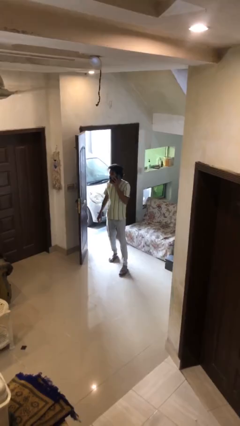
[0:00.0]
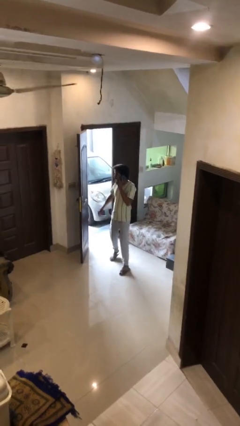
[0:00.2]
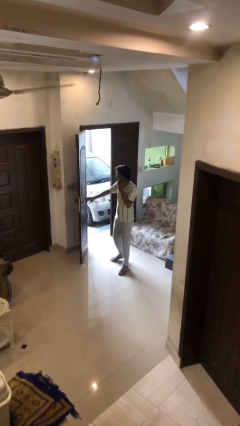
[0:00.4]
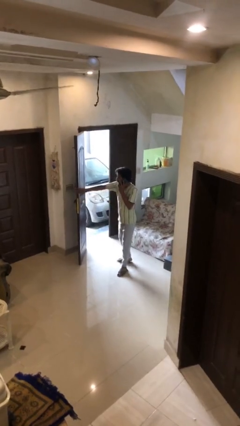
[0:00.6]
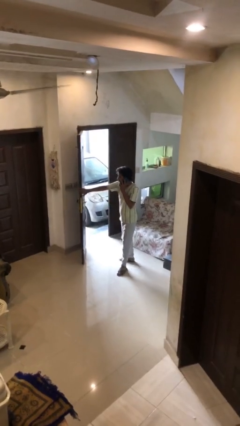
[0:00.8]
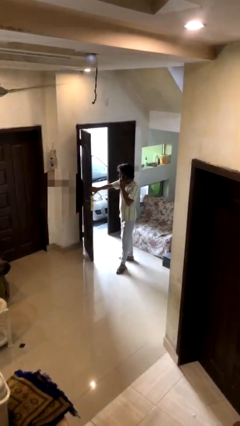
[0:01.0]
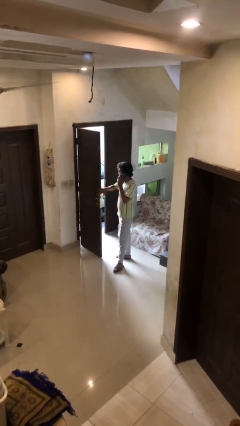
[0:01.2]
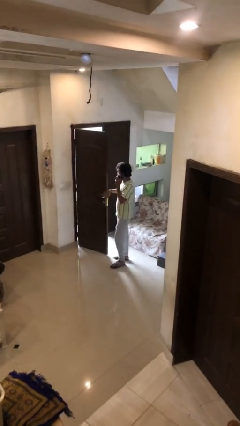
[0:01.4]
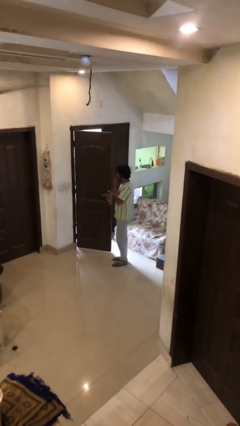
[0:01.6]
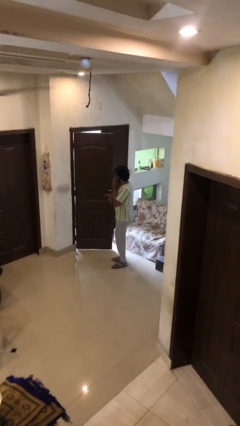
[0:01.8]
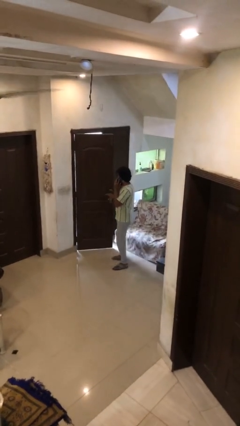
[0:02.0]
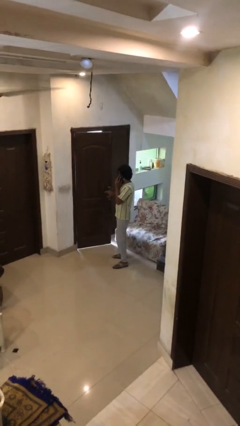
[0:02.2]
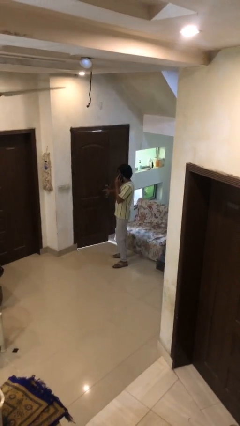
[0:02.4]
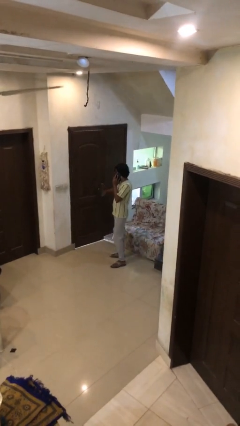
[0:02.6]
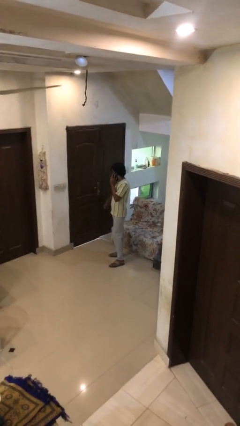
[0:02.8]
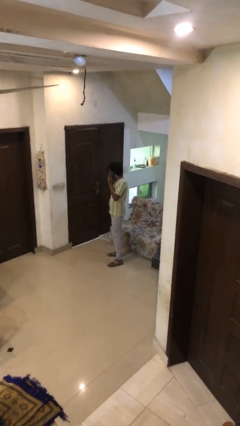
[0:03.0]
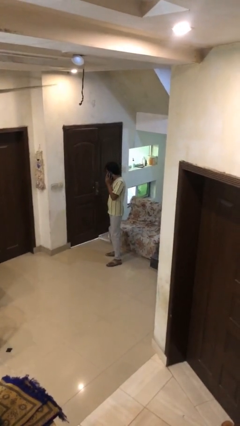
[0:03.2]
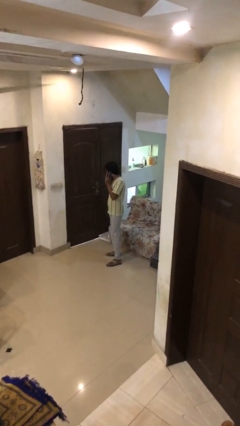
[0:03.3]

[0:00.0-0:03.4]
person closes facility door

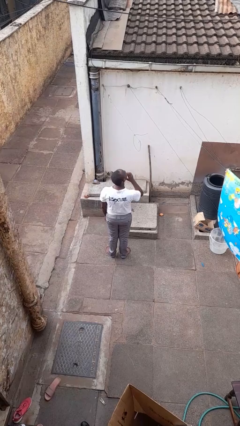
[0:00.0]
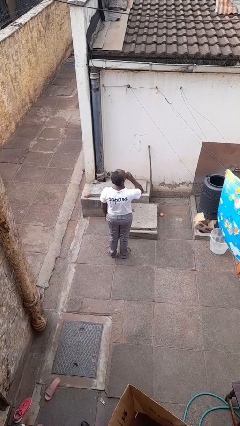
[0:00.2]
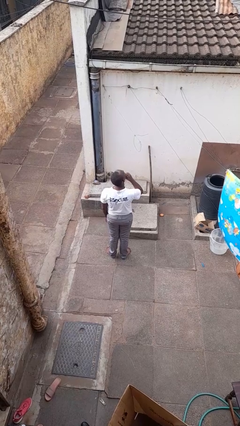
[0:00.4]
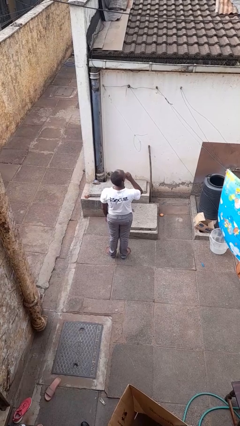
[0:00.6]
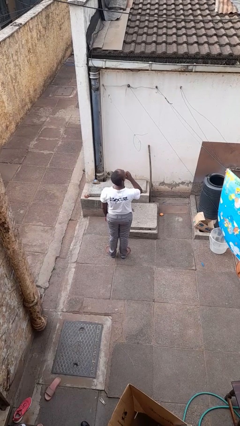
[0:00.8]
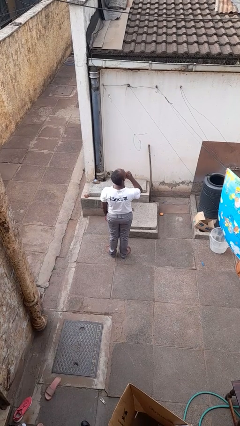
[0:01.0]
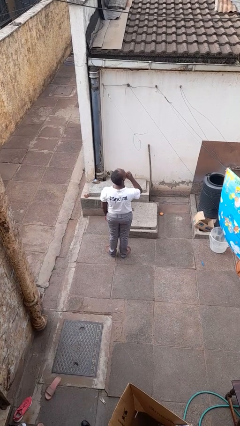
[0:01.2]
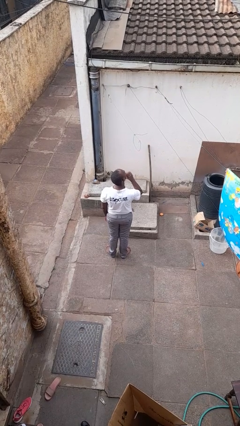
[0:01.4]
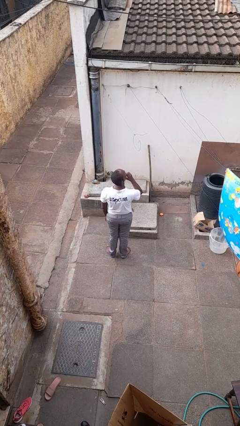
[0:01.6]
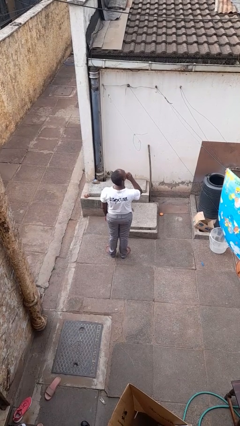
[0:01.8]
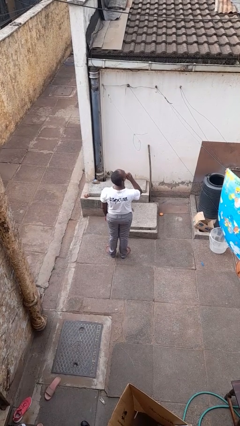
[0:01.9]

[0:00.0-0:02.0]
person strokes chin

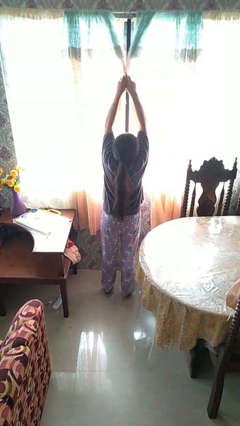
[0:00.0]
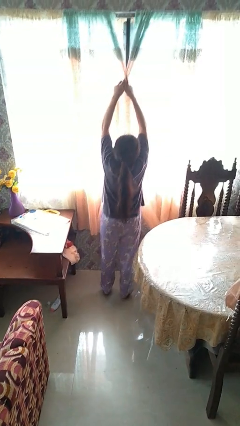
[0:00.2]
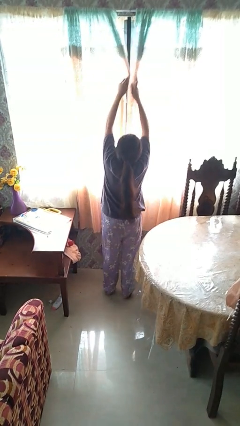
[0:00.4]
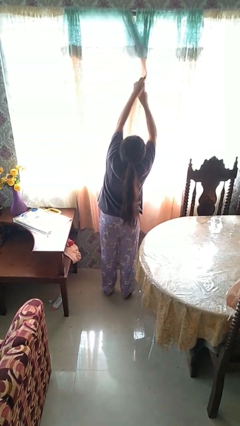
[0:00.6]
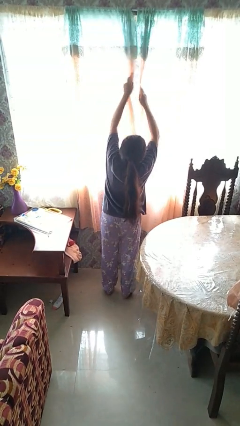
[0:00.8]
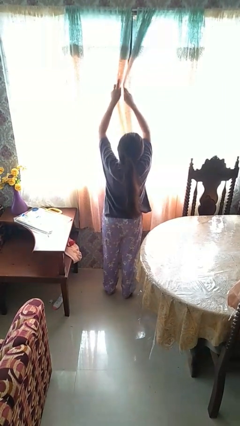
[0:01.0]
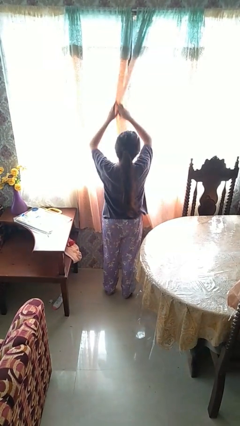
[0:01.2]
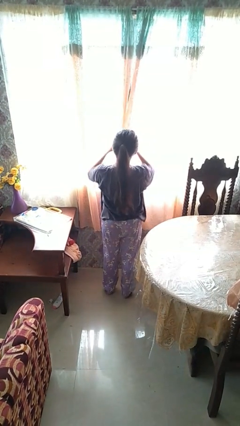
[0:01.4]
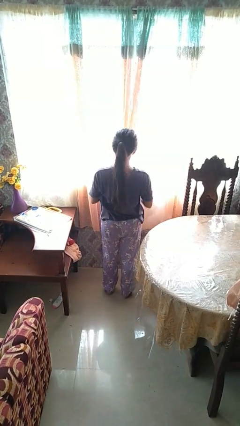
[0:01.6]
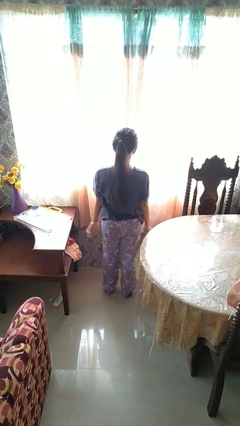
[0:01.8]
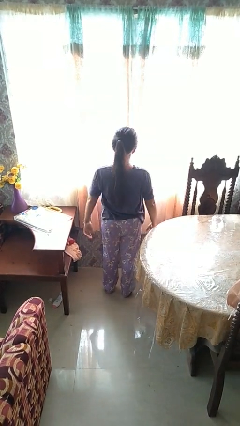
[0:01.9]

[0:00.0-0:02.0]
person closes curtains

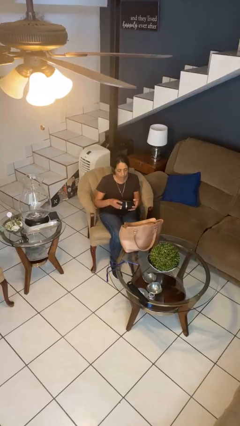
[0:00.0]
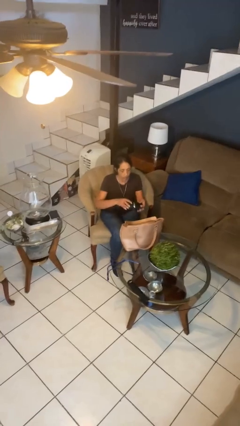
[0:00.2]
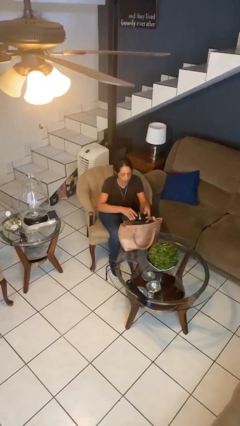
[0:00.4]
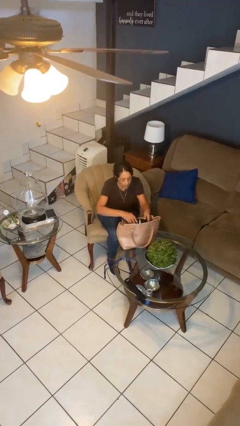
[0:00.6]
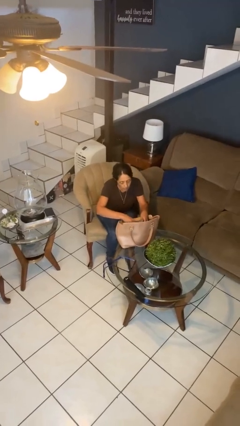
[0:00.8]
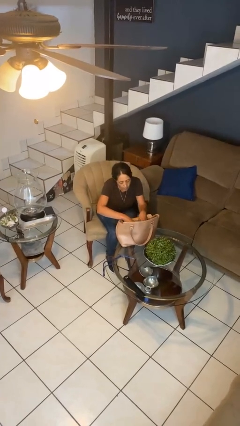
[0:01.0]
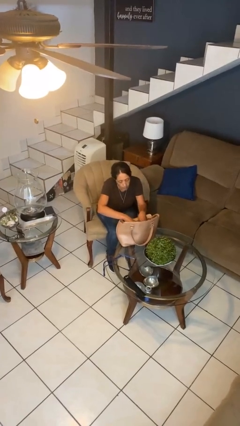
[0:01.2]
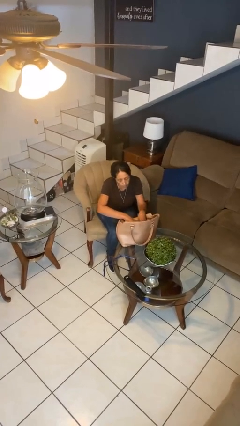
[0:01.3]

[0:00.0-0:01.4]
person puts object into purse

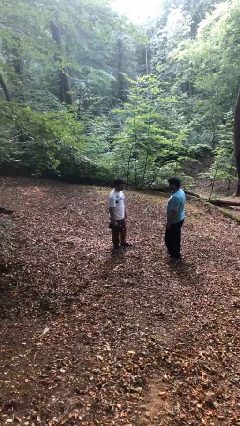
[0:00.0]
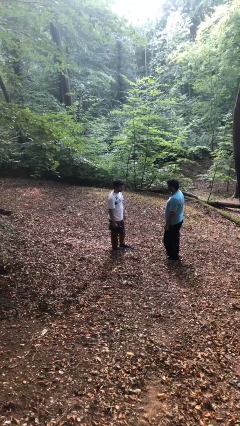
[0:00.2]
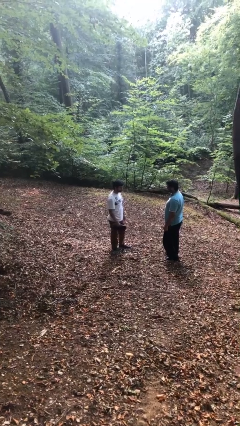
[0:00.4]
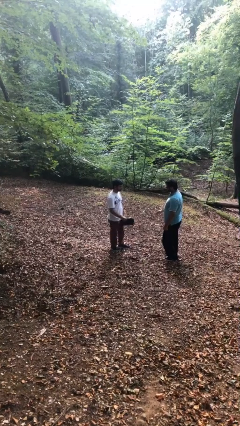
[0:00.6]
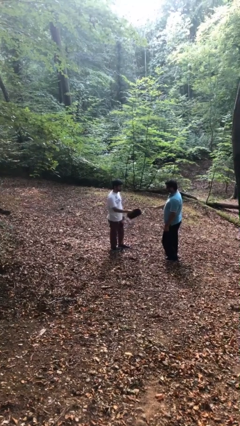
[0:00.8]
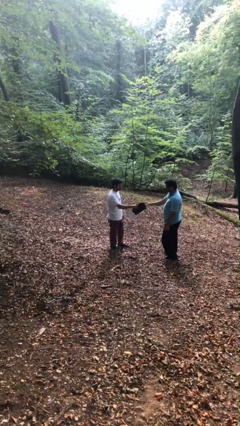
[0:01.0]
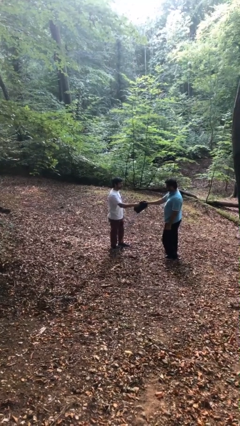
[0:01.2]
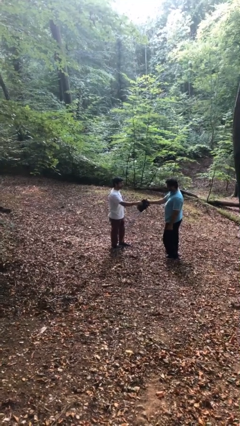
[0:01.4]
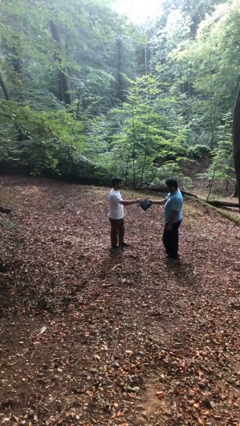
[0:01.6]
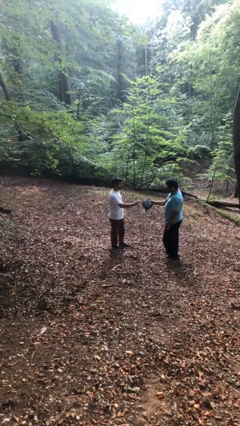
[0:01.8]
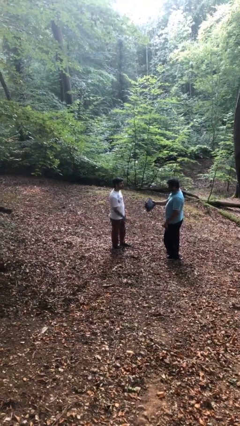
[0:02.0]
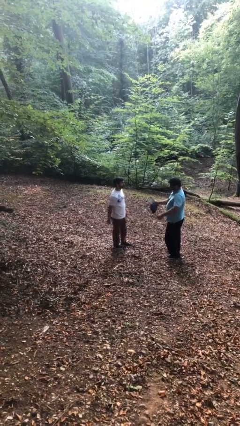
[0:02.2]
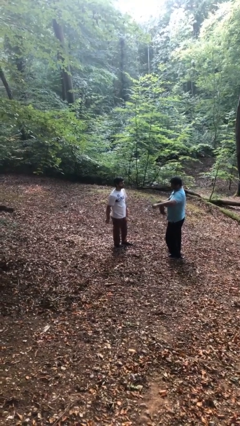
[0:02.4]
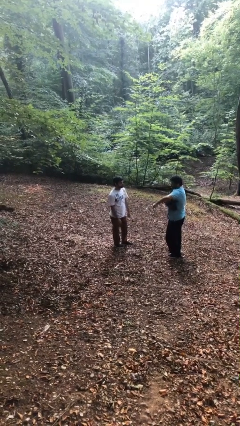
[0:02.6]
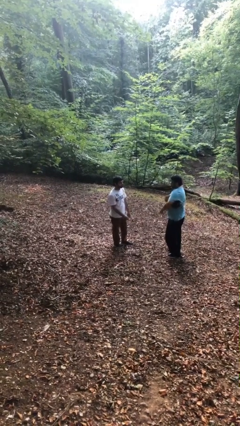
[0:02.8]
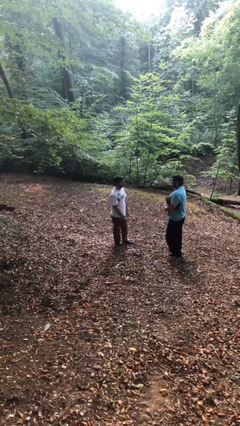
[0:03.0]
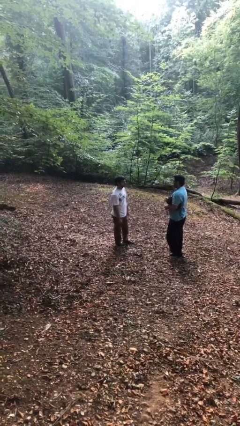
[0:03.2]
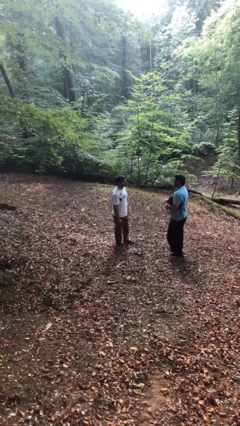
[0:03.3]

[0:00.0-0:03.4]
person transfers object to person

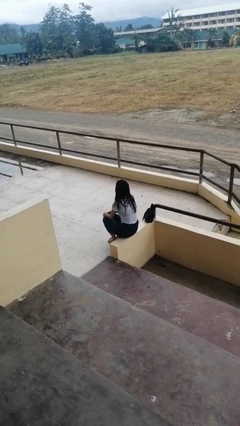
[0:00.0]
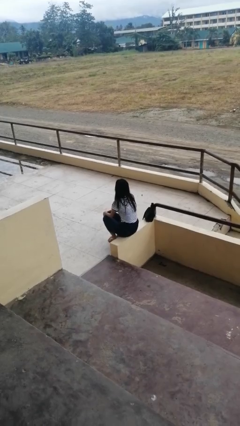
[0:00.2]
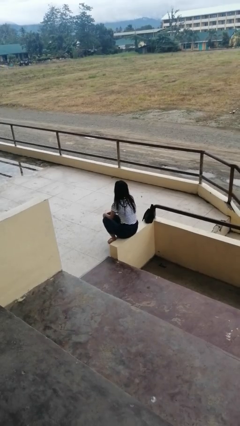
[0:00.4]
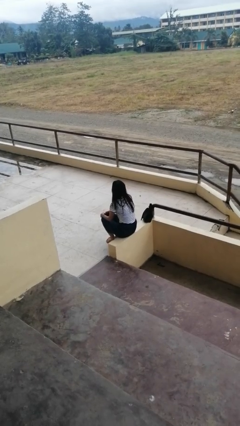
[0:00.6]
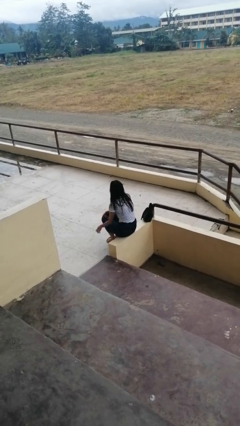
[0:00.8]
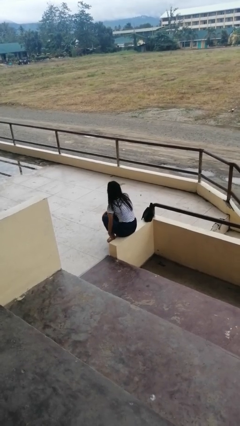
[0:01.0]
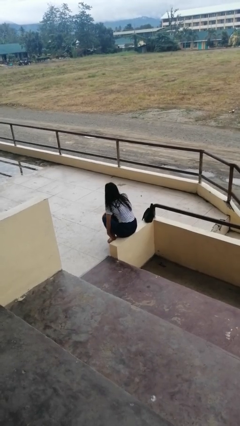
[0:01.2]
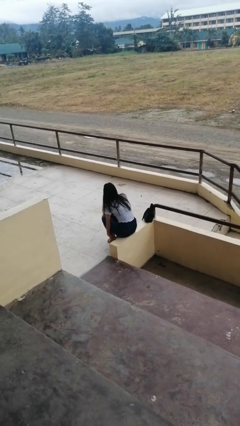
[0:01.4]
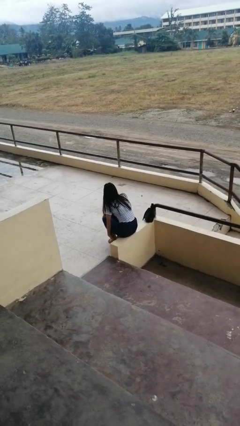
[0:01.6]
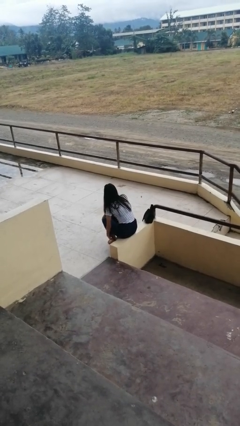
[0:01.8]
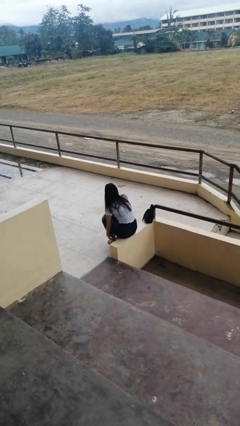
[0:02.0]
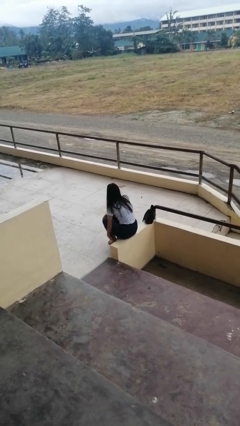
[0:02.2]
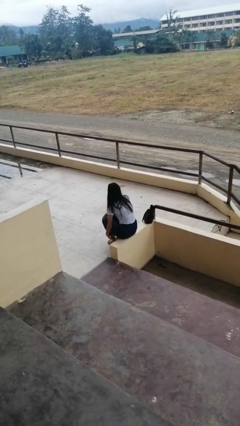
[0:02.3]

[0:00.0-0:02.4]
person rubs foot

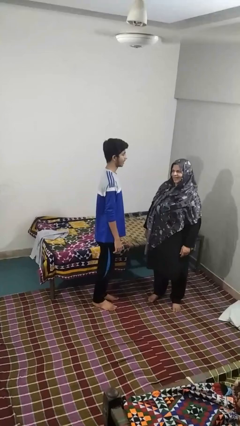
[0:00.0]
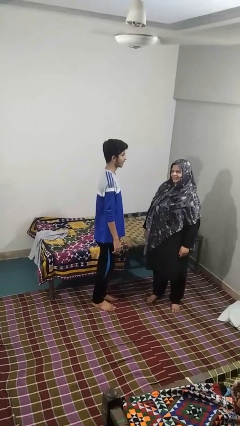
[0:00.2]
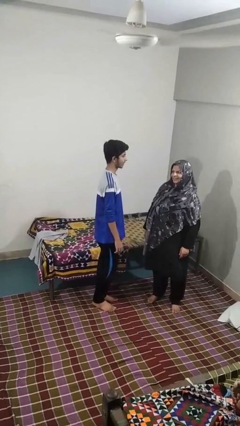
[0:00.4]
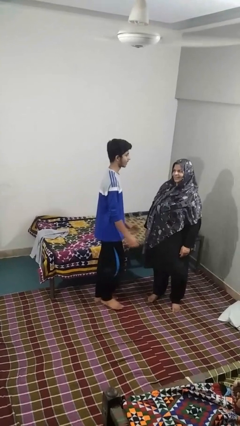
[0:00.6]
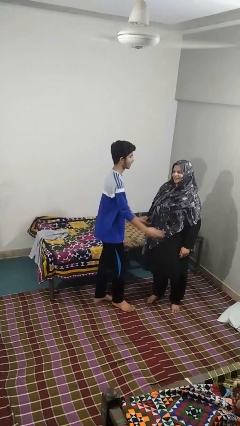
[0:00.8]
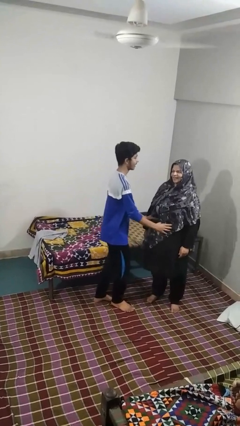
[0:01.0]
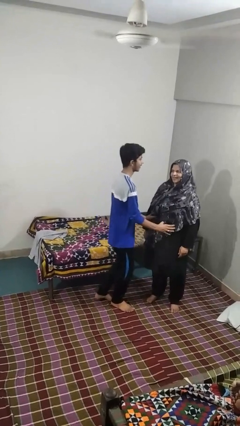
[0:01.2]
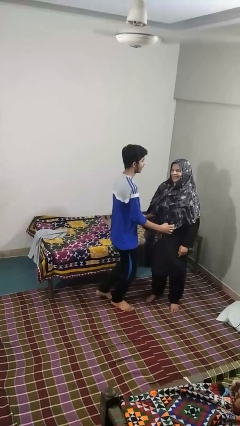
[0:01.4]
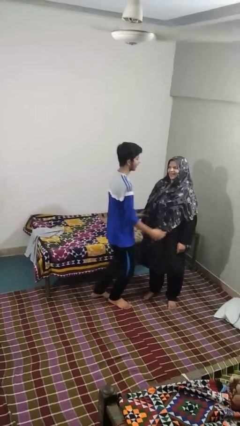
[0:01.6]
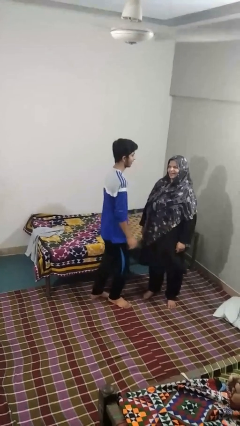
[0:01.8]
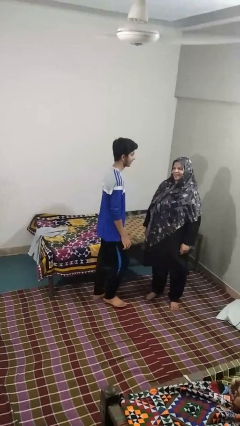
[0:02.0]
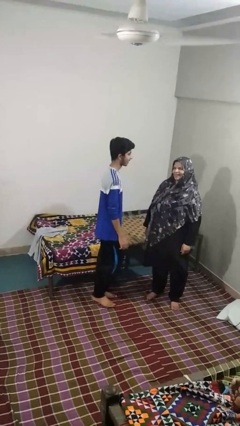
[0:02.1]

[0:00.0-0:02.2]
person tickles person

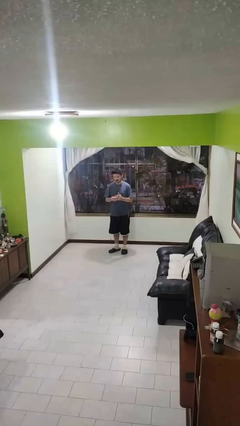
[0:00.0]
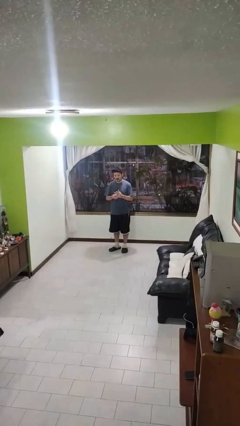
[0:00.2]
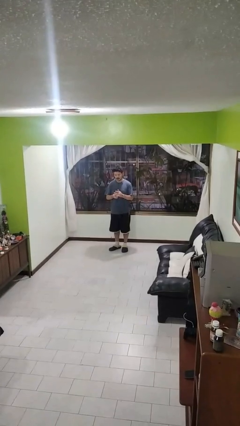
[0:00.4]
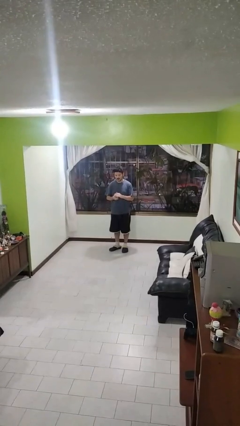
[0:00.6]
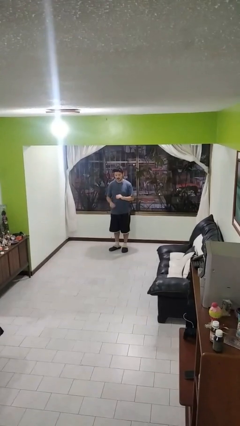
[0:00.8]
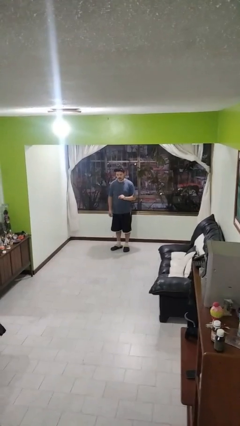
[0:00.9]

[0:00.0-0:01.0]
person puts on ring
